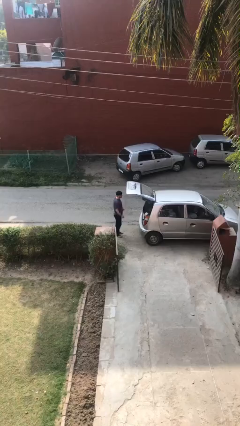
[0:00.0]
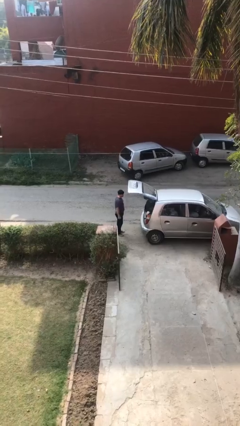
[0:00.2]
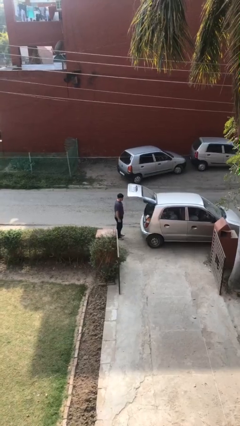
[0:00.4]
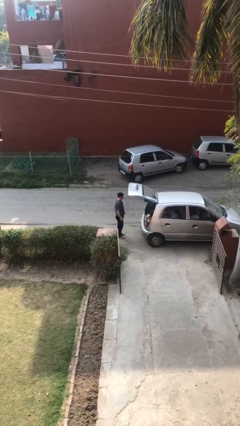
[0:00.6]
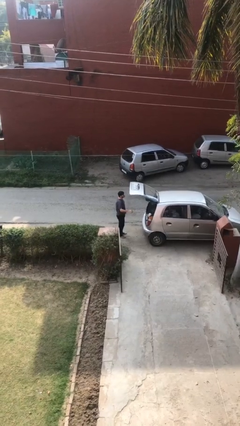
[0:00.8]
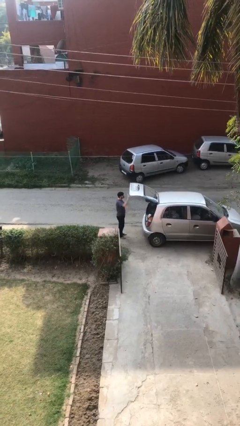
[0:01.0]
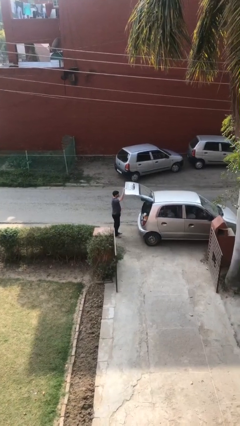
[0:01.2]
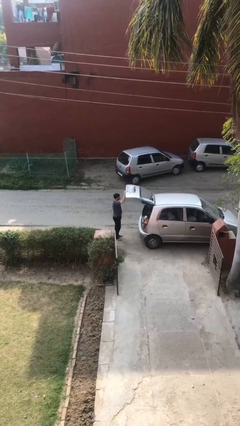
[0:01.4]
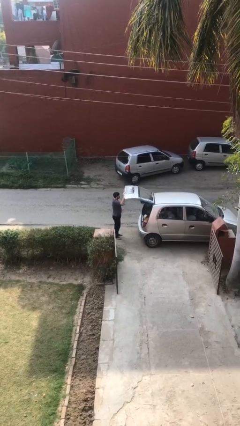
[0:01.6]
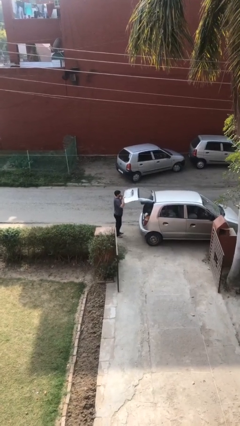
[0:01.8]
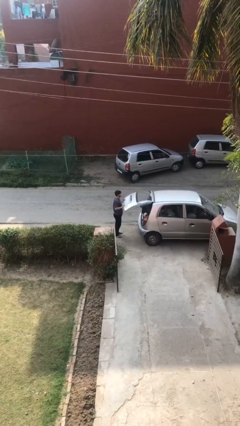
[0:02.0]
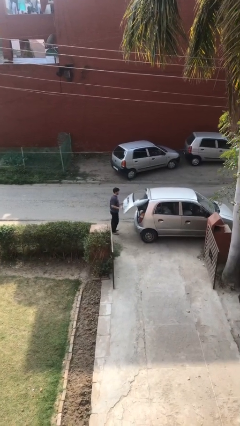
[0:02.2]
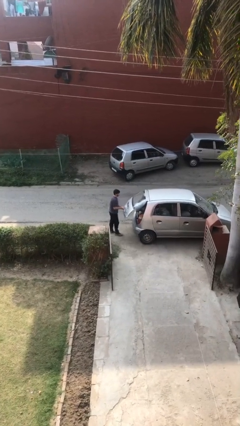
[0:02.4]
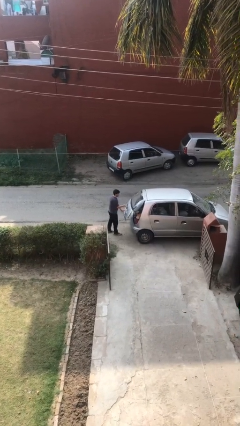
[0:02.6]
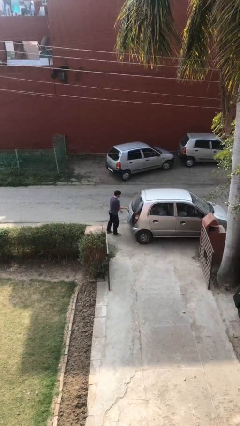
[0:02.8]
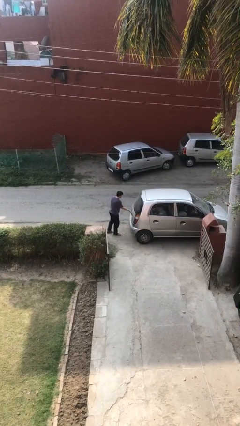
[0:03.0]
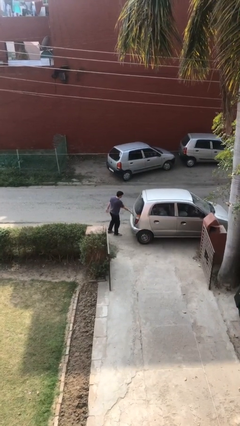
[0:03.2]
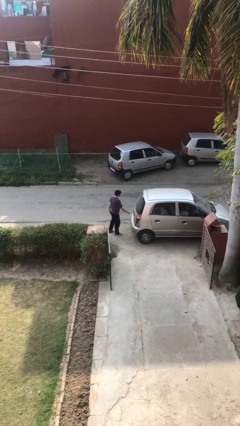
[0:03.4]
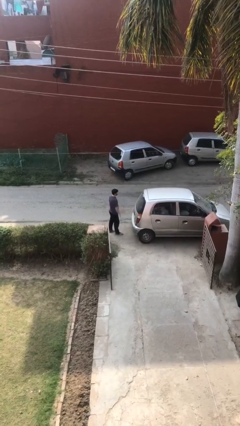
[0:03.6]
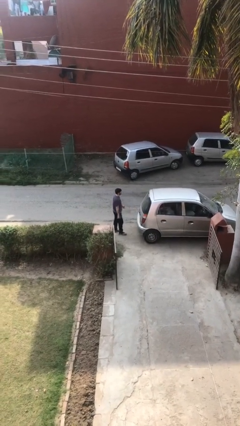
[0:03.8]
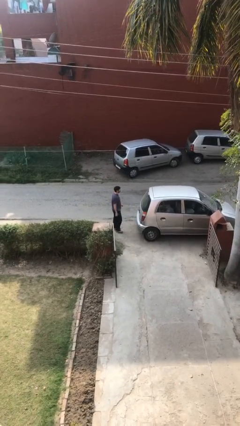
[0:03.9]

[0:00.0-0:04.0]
person closes car trunk

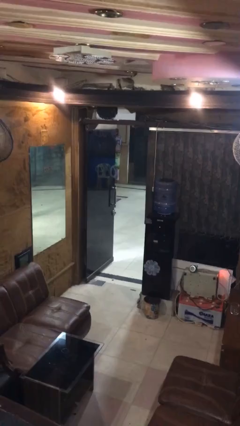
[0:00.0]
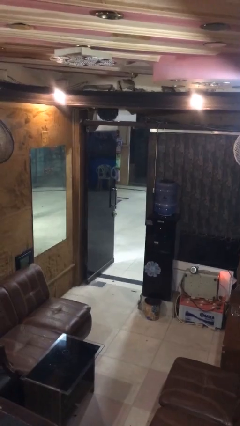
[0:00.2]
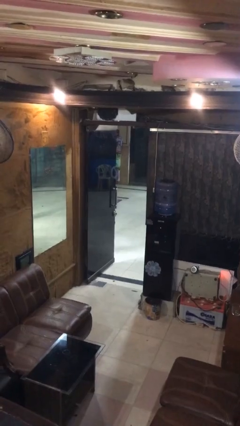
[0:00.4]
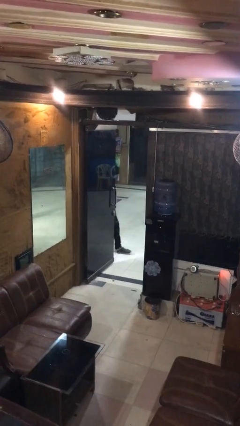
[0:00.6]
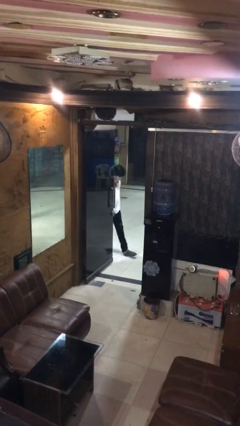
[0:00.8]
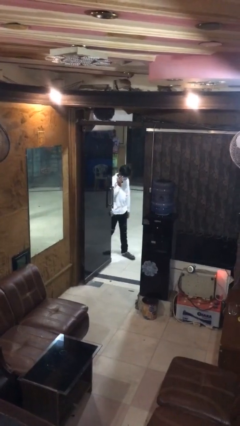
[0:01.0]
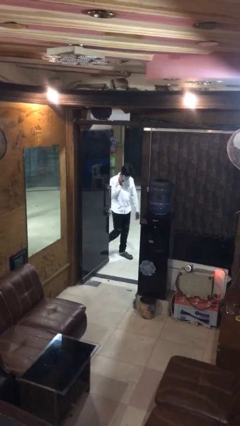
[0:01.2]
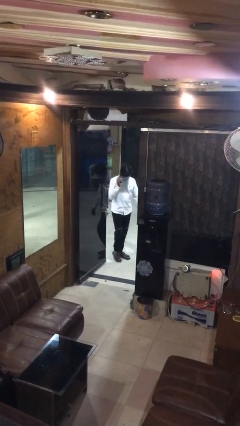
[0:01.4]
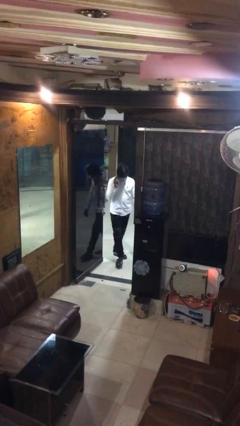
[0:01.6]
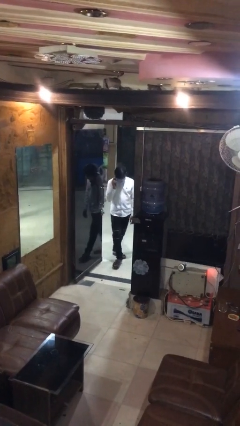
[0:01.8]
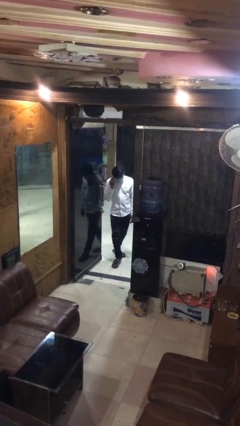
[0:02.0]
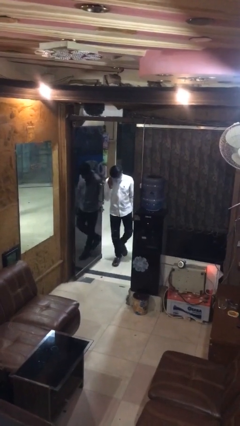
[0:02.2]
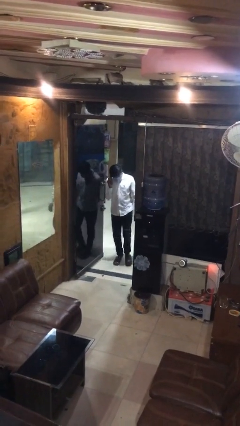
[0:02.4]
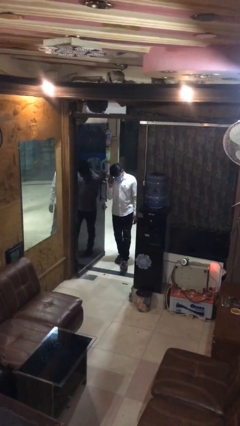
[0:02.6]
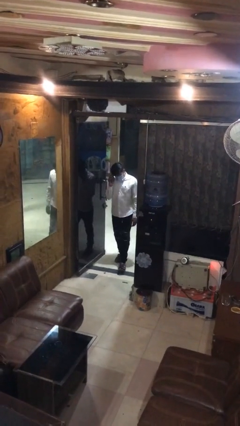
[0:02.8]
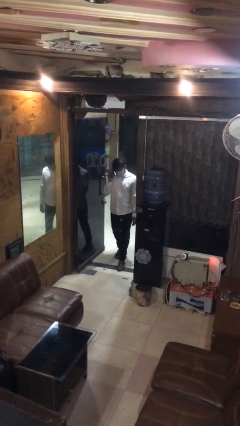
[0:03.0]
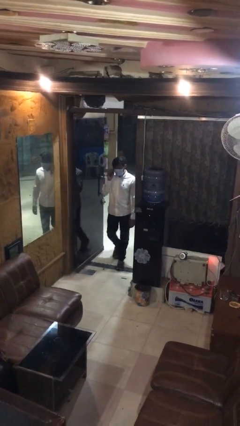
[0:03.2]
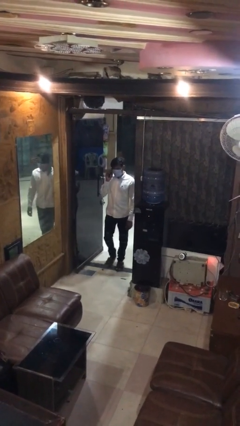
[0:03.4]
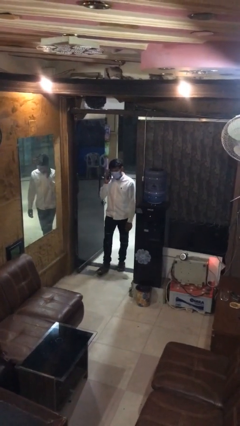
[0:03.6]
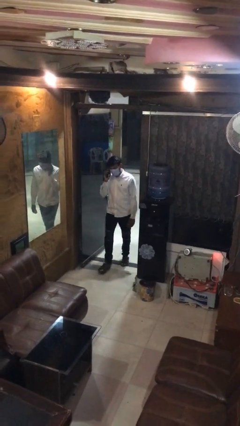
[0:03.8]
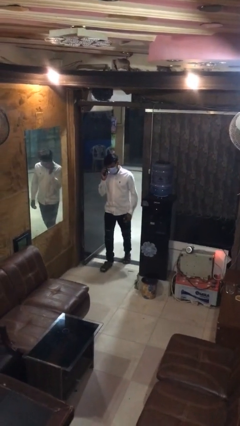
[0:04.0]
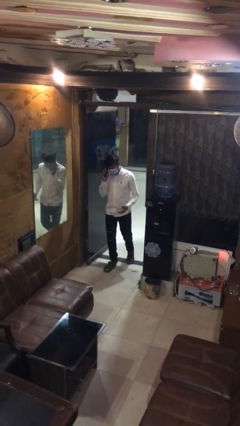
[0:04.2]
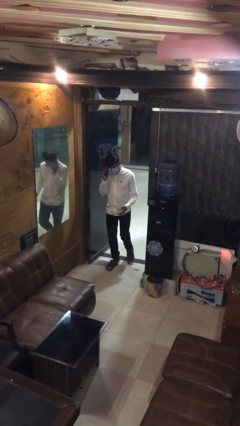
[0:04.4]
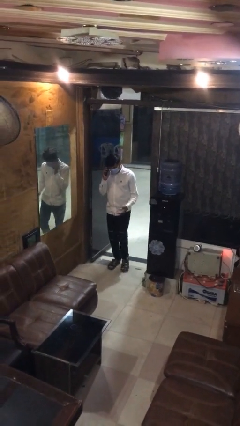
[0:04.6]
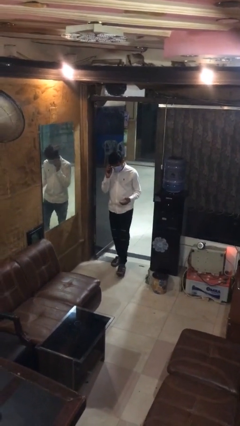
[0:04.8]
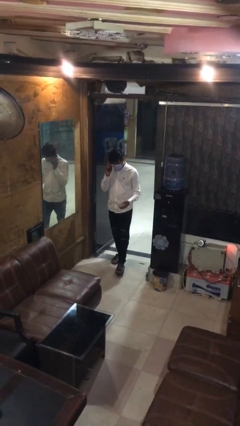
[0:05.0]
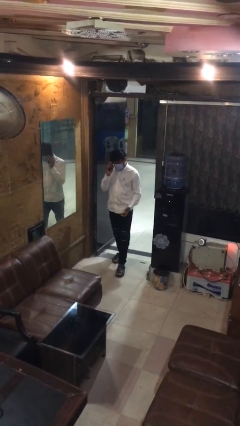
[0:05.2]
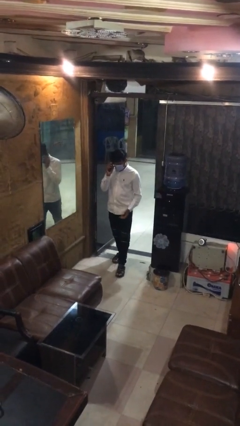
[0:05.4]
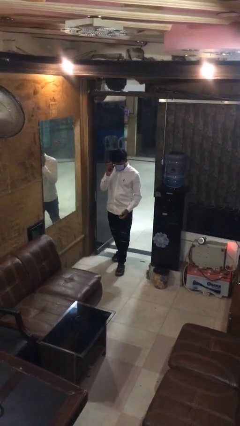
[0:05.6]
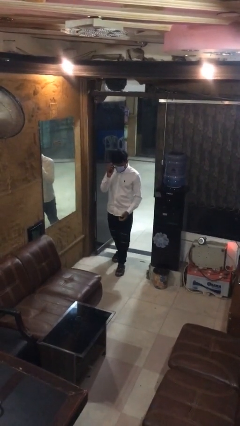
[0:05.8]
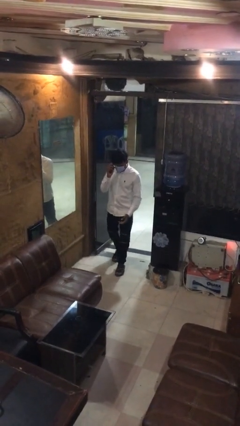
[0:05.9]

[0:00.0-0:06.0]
person enters scene through structure

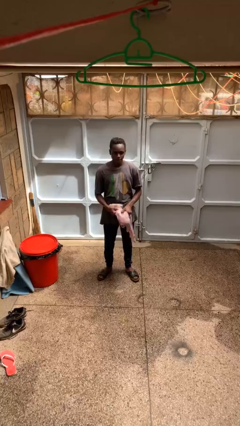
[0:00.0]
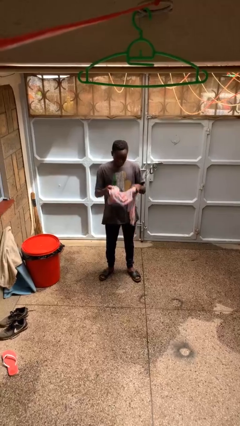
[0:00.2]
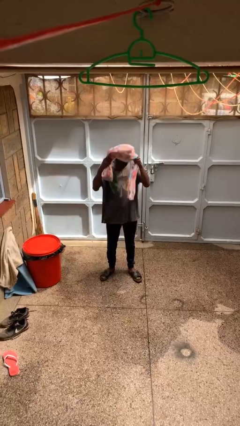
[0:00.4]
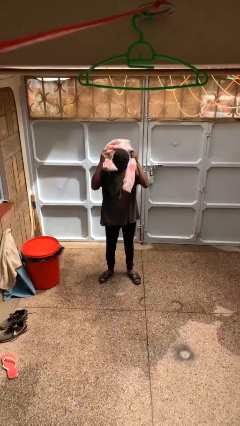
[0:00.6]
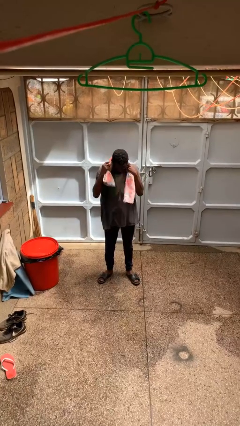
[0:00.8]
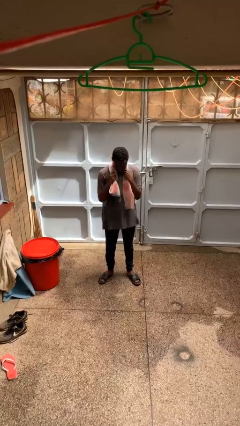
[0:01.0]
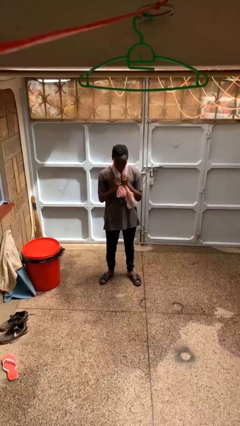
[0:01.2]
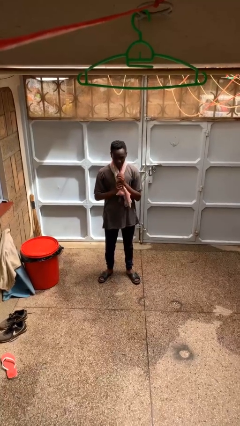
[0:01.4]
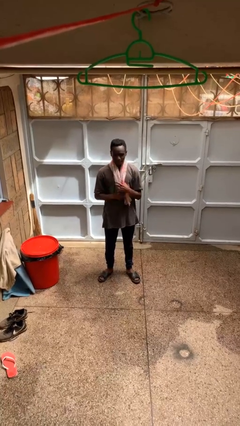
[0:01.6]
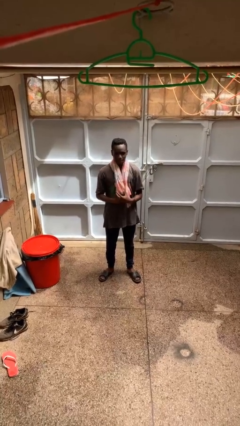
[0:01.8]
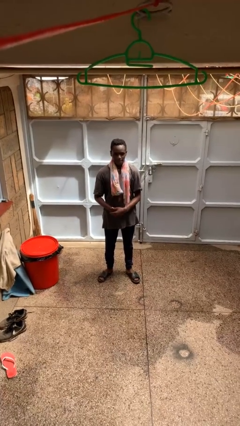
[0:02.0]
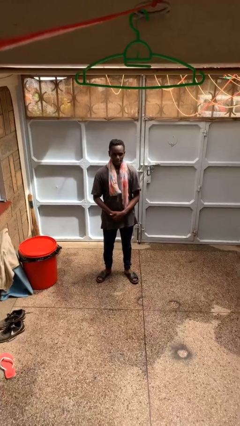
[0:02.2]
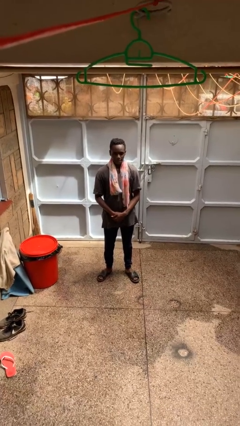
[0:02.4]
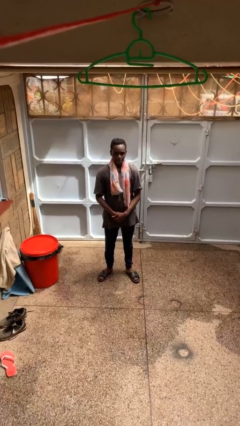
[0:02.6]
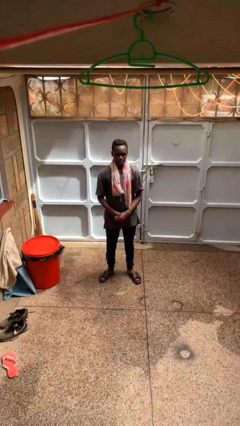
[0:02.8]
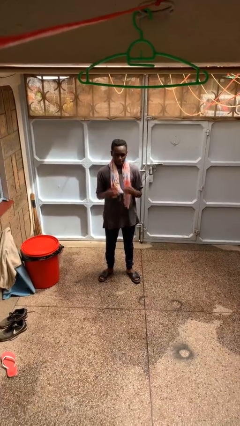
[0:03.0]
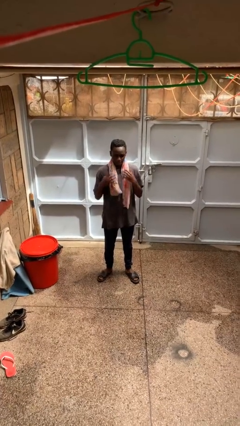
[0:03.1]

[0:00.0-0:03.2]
person puts on scarf

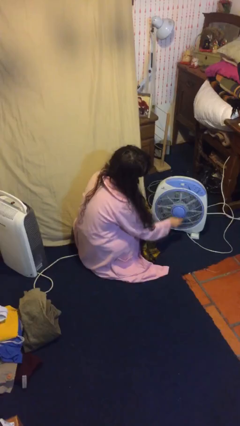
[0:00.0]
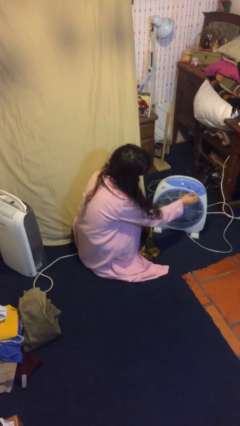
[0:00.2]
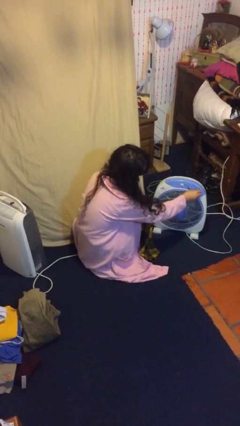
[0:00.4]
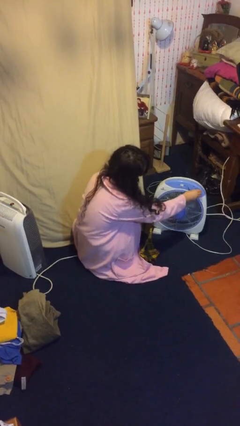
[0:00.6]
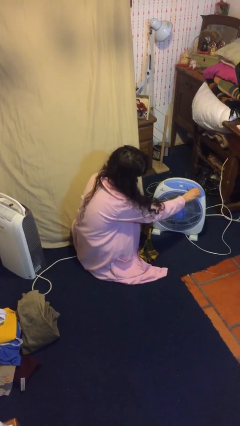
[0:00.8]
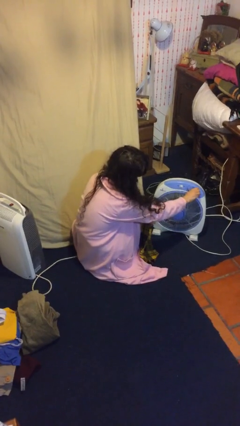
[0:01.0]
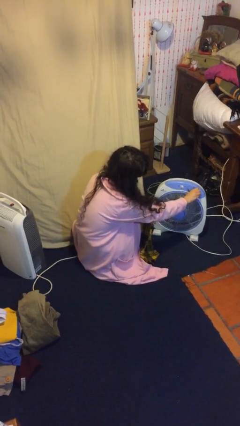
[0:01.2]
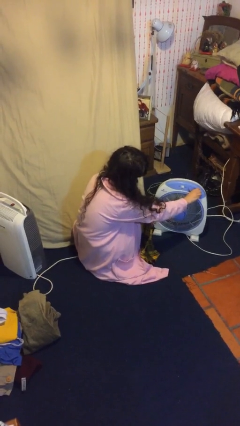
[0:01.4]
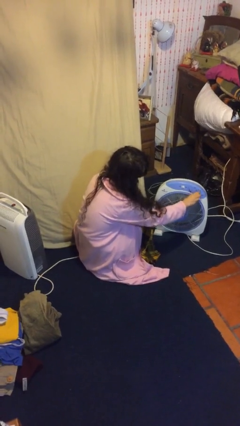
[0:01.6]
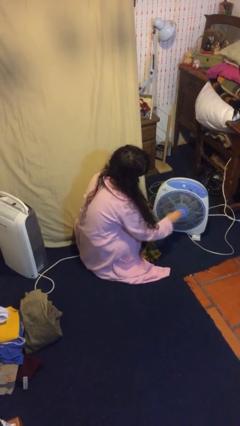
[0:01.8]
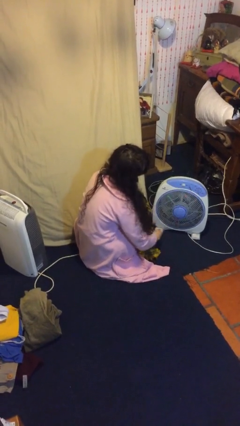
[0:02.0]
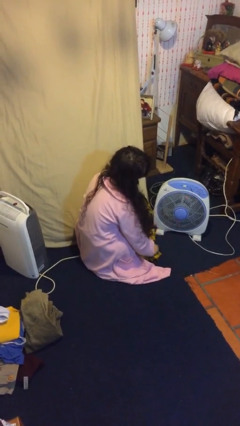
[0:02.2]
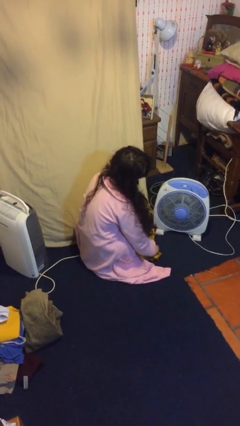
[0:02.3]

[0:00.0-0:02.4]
person turns on fan

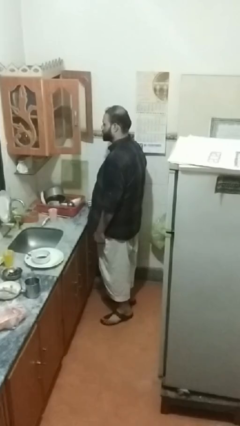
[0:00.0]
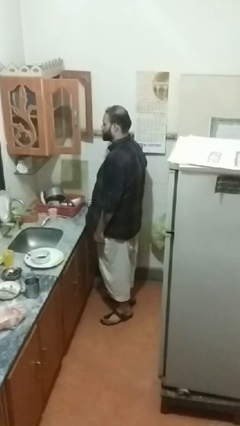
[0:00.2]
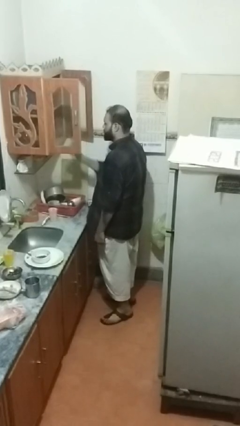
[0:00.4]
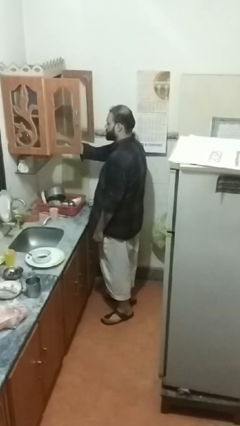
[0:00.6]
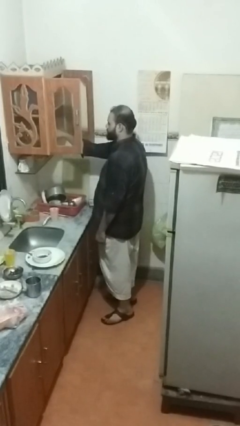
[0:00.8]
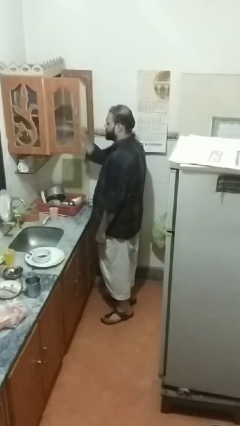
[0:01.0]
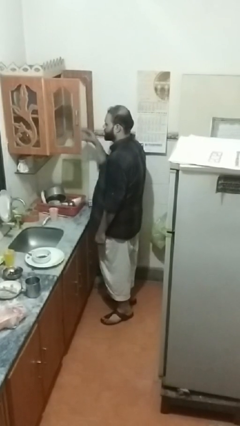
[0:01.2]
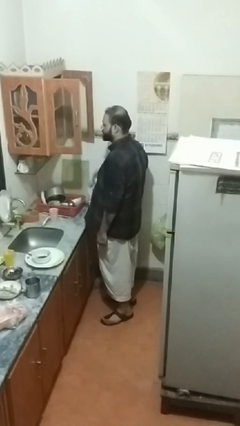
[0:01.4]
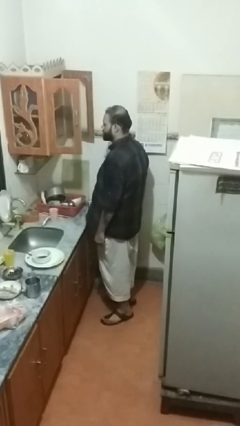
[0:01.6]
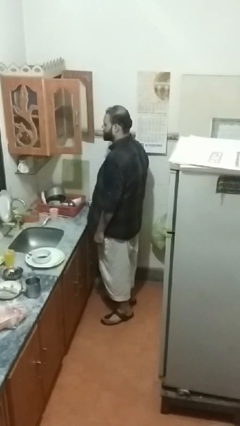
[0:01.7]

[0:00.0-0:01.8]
person takes object from cabinet

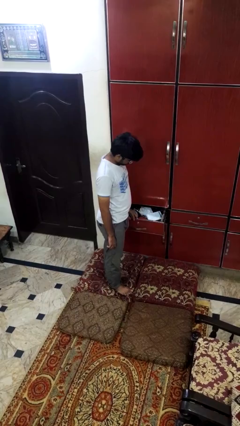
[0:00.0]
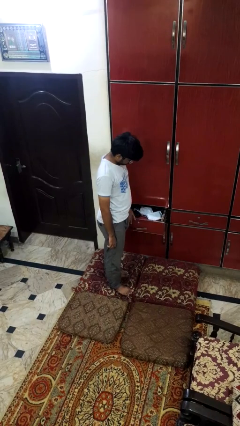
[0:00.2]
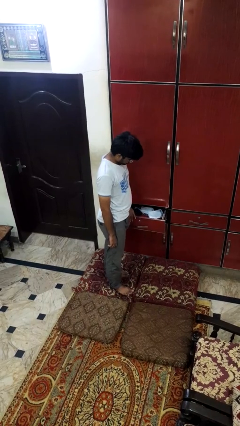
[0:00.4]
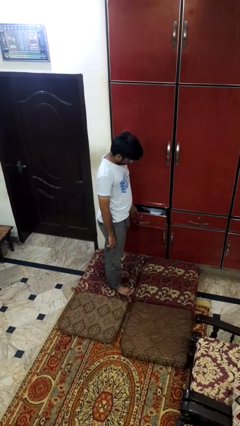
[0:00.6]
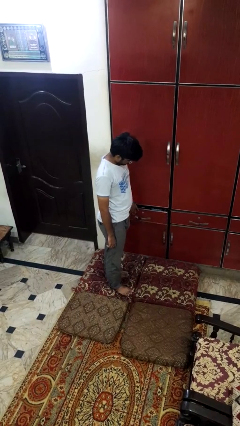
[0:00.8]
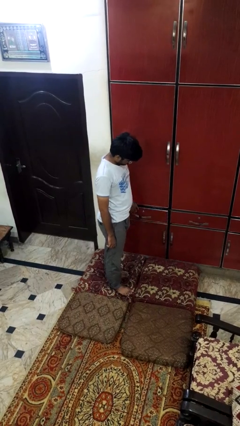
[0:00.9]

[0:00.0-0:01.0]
person closes dresser drawer
